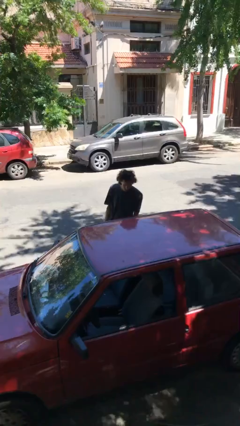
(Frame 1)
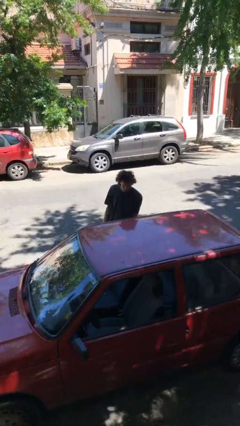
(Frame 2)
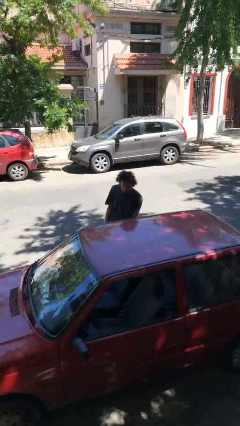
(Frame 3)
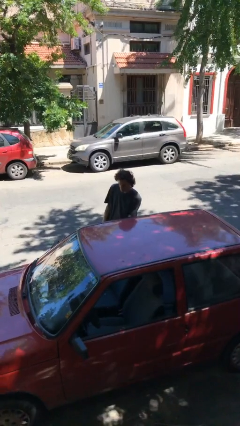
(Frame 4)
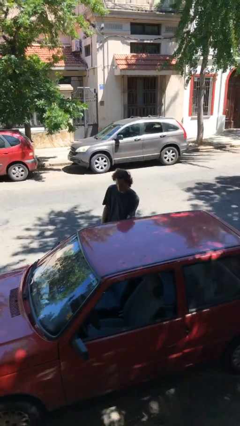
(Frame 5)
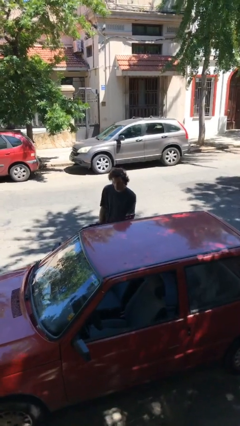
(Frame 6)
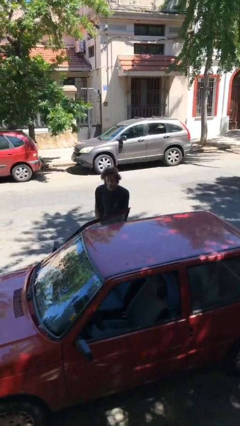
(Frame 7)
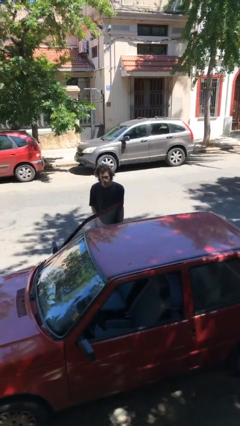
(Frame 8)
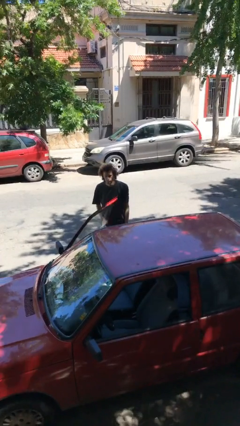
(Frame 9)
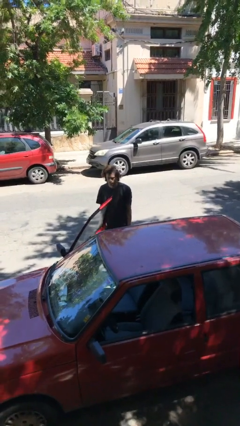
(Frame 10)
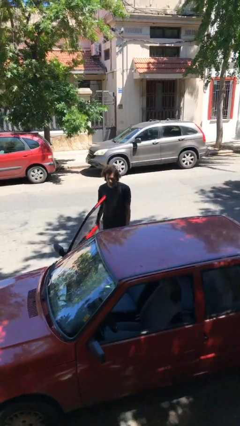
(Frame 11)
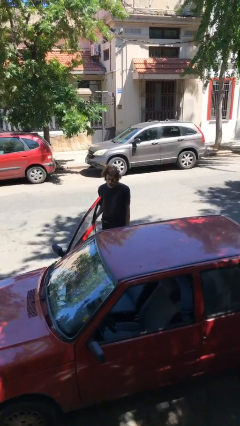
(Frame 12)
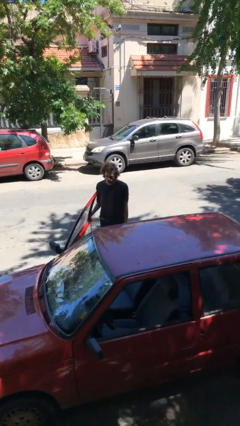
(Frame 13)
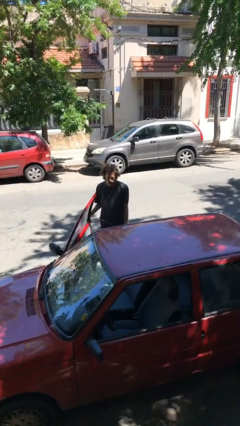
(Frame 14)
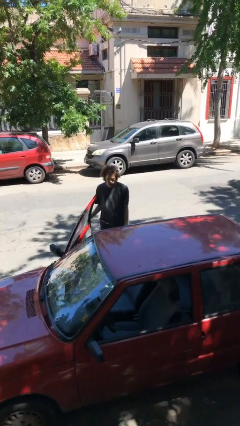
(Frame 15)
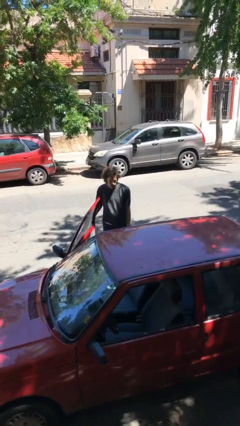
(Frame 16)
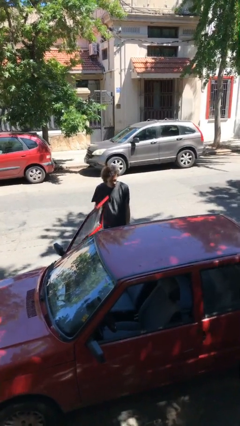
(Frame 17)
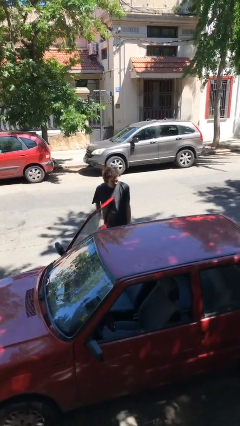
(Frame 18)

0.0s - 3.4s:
person opens car door
